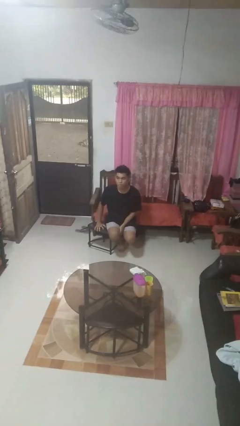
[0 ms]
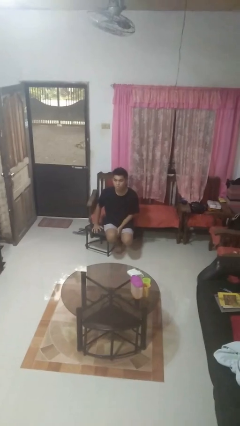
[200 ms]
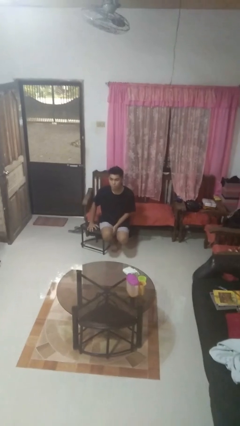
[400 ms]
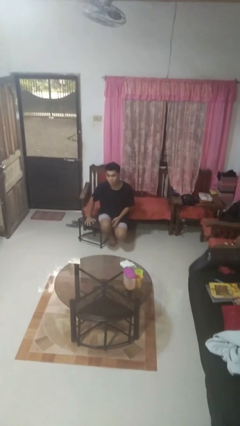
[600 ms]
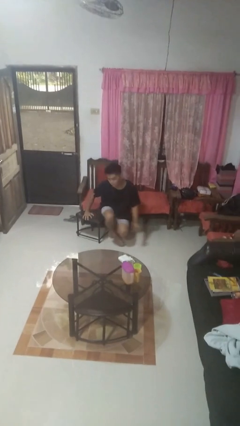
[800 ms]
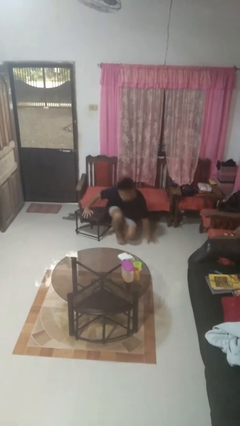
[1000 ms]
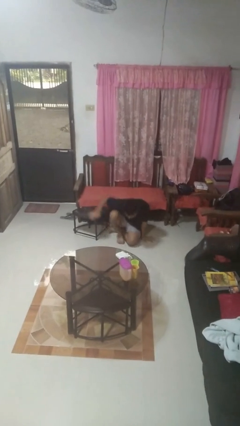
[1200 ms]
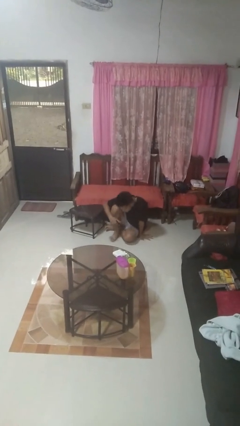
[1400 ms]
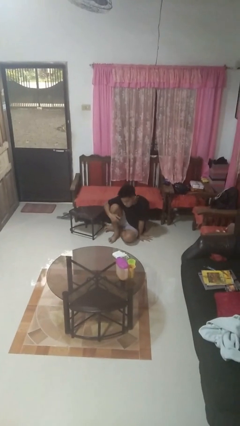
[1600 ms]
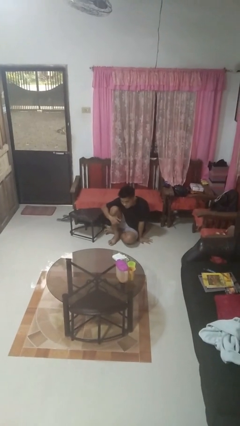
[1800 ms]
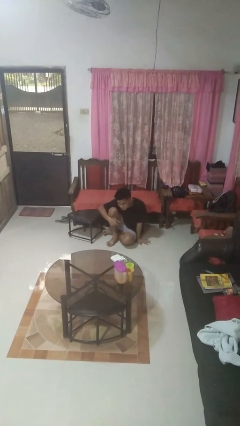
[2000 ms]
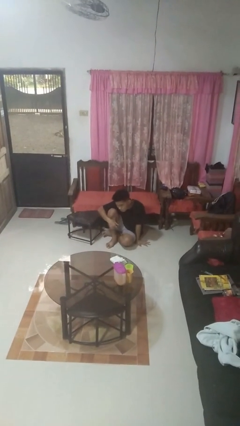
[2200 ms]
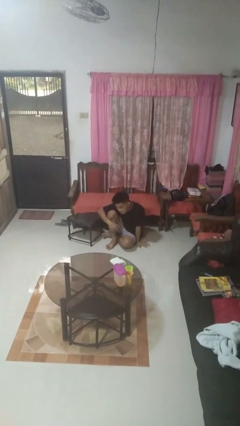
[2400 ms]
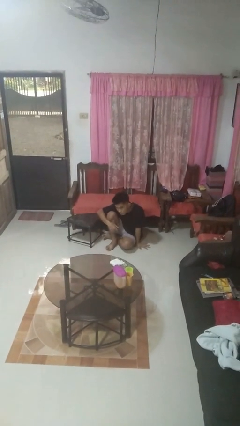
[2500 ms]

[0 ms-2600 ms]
person falls from chair

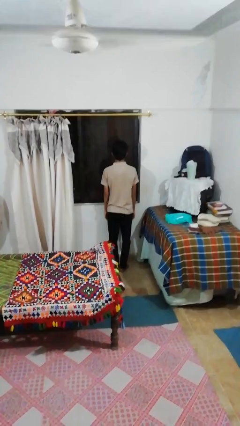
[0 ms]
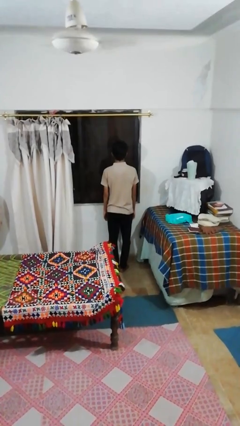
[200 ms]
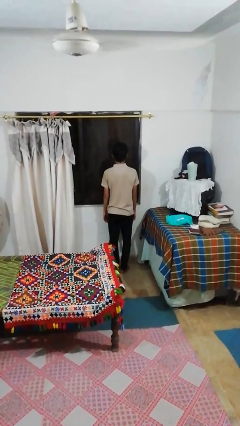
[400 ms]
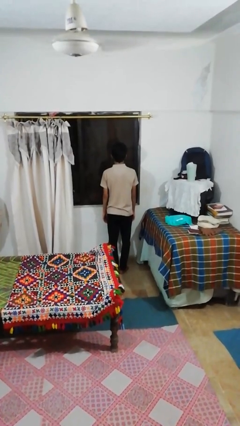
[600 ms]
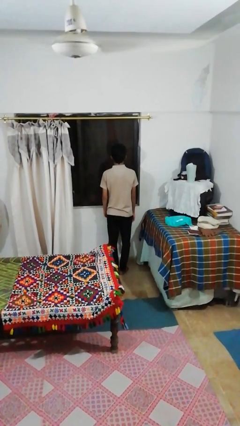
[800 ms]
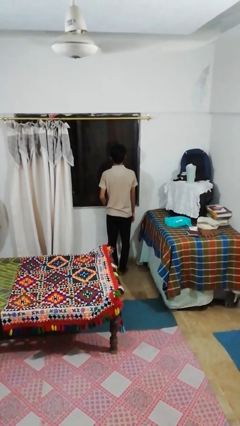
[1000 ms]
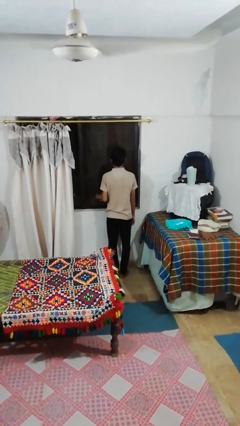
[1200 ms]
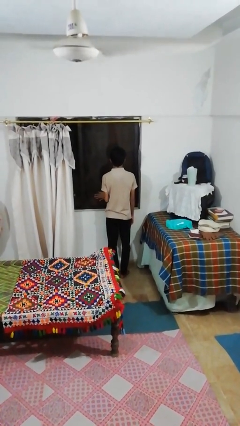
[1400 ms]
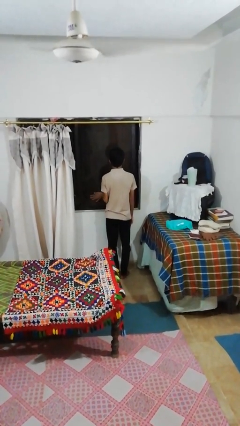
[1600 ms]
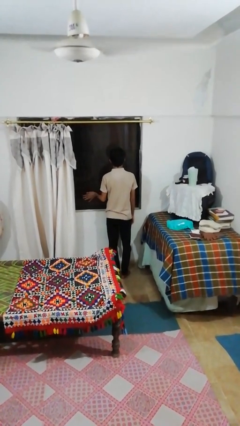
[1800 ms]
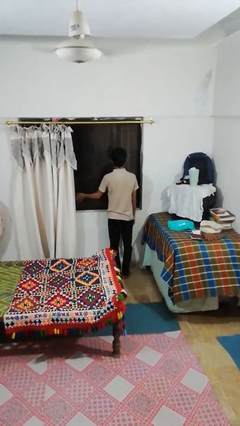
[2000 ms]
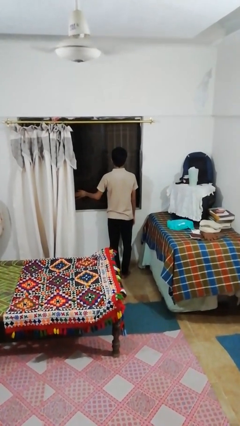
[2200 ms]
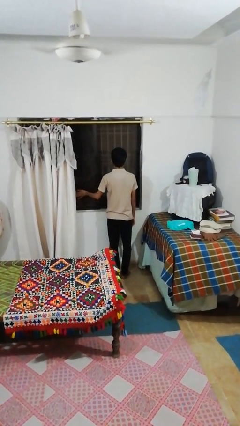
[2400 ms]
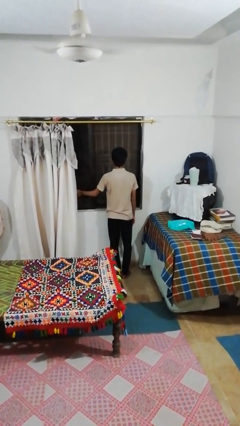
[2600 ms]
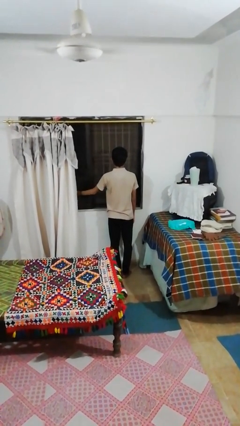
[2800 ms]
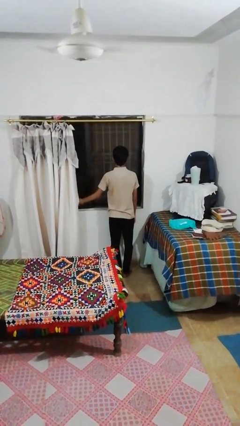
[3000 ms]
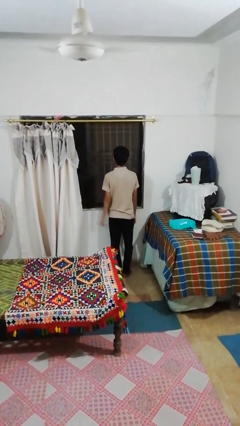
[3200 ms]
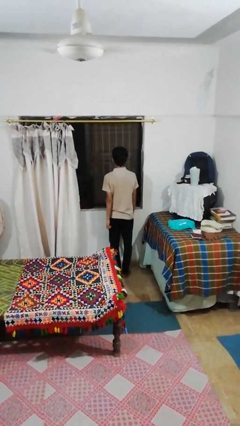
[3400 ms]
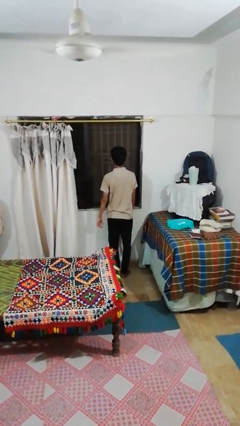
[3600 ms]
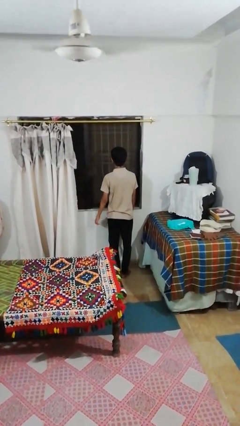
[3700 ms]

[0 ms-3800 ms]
person opens sliding door

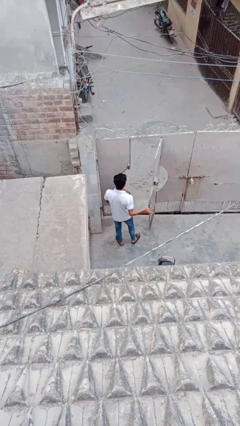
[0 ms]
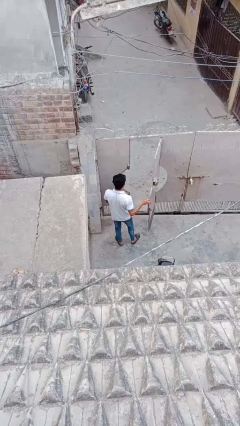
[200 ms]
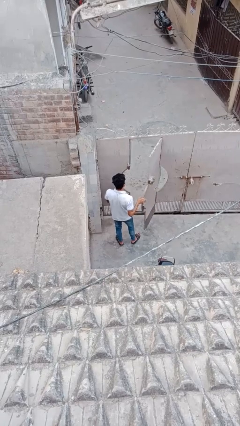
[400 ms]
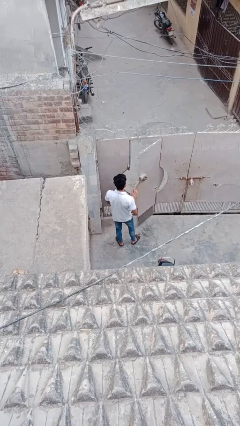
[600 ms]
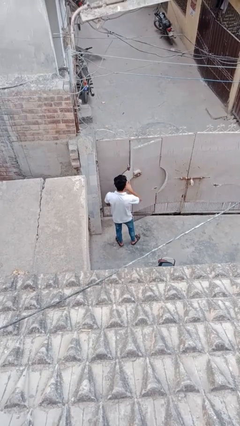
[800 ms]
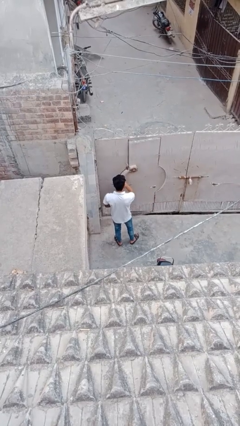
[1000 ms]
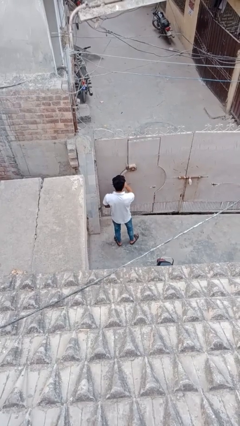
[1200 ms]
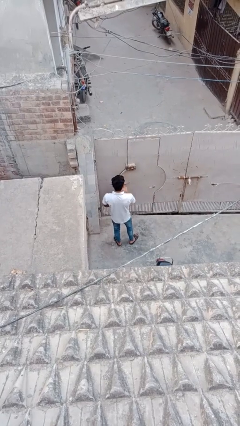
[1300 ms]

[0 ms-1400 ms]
person closes facility door

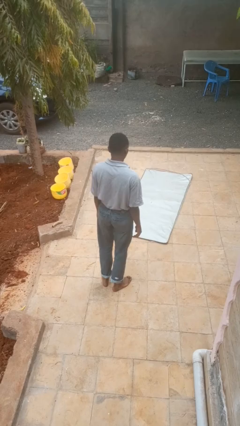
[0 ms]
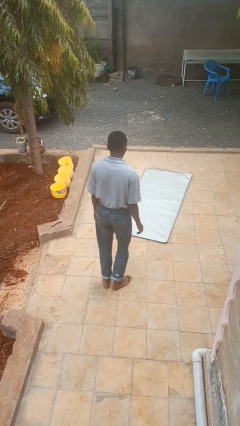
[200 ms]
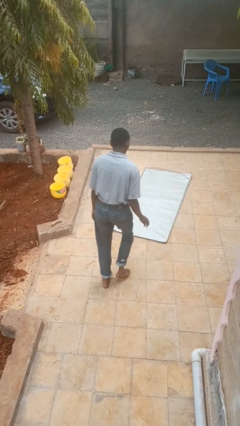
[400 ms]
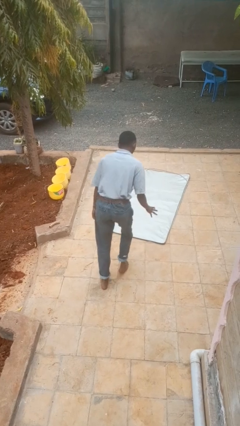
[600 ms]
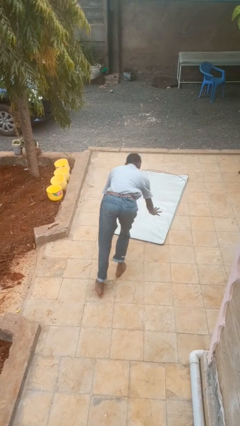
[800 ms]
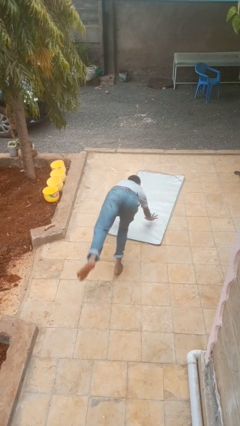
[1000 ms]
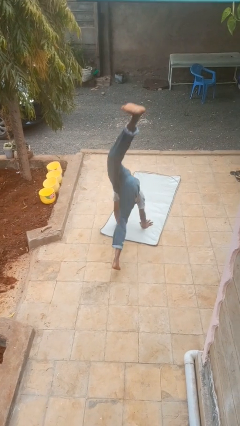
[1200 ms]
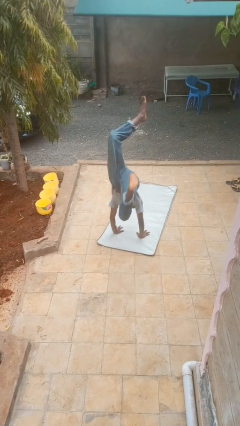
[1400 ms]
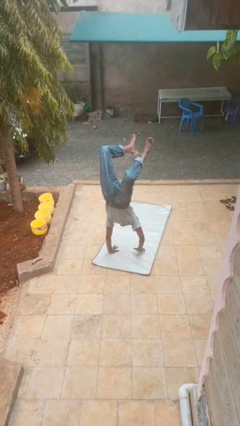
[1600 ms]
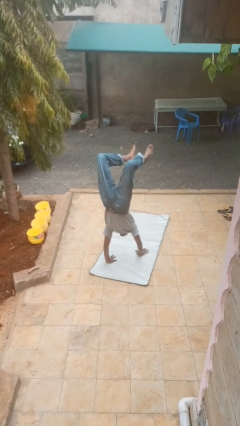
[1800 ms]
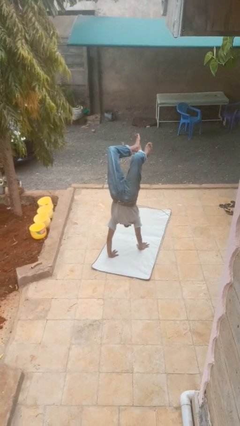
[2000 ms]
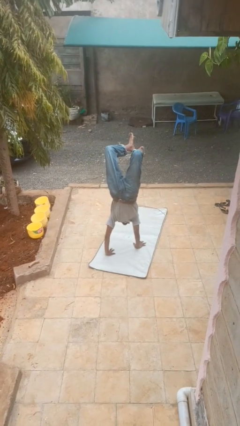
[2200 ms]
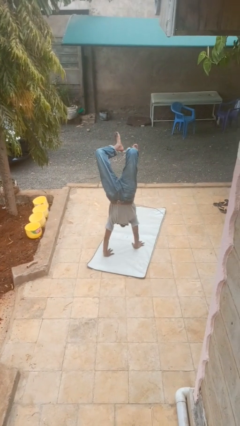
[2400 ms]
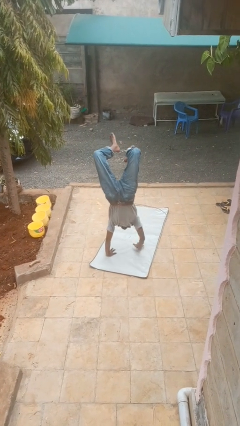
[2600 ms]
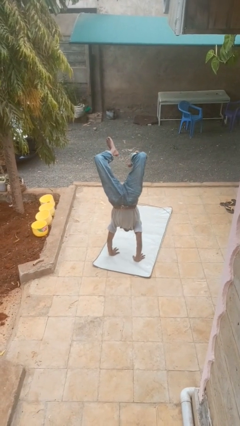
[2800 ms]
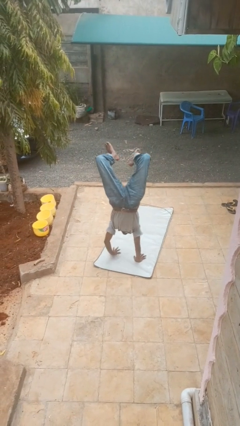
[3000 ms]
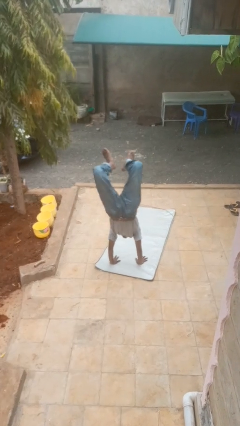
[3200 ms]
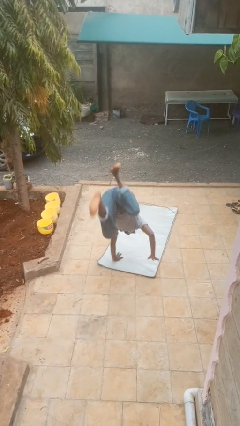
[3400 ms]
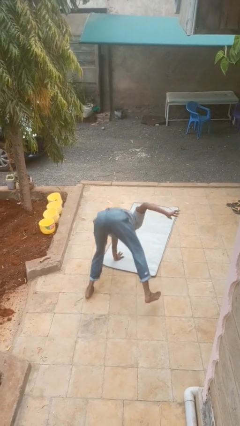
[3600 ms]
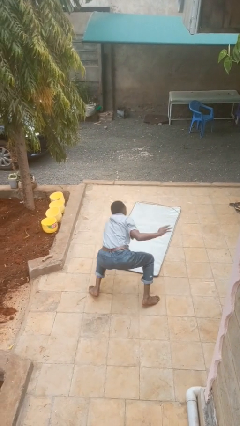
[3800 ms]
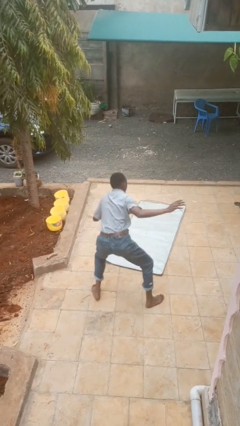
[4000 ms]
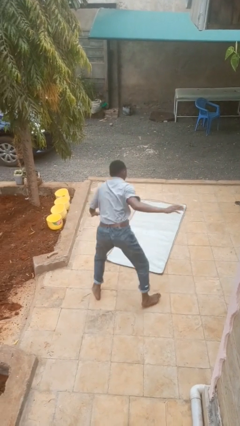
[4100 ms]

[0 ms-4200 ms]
person handstand

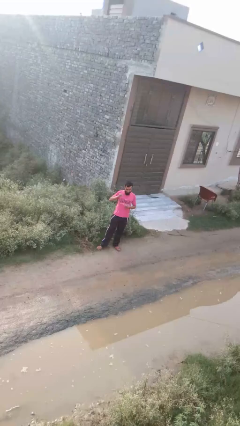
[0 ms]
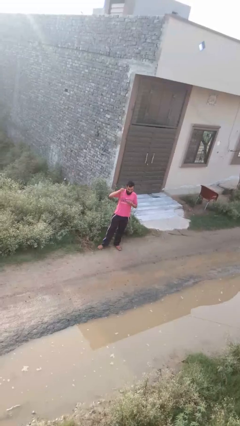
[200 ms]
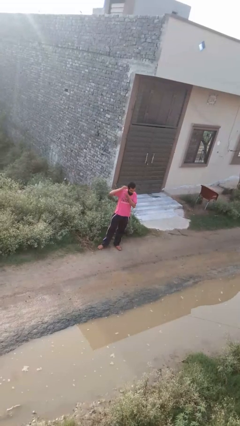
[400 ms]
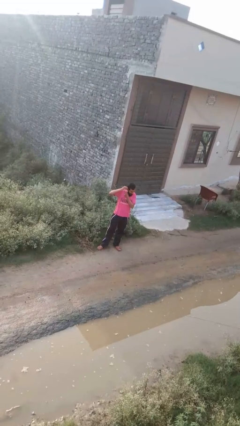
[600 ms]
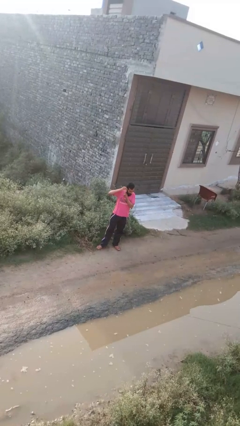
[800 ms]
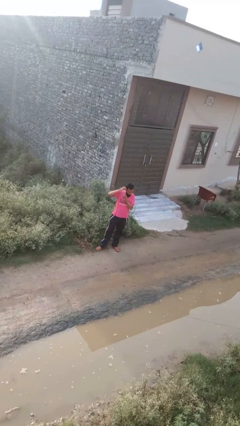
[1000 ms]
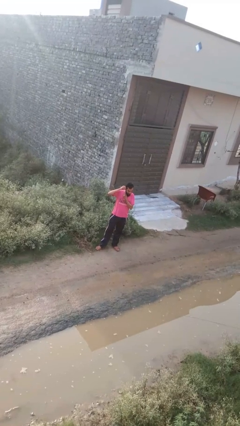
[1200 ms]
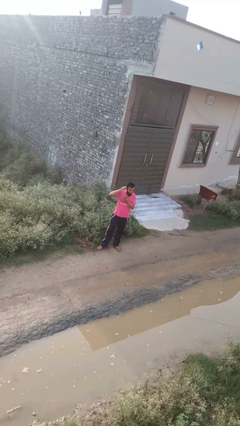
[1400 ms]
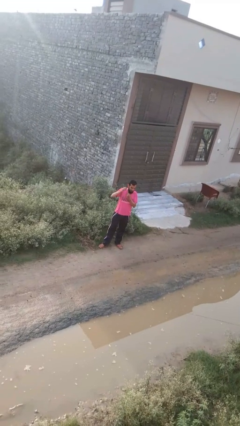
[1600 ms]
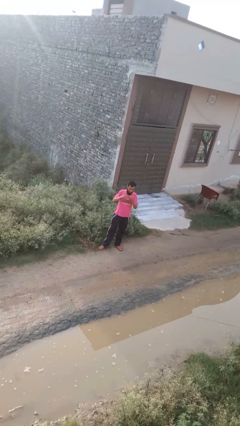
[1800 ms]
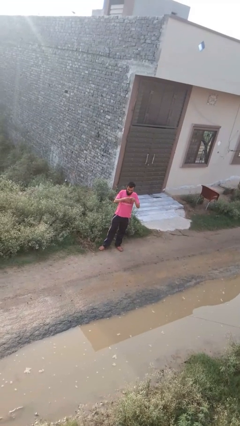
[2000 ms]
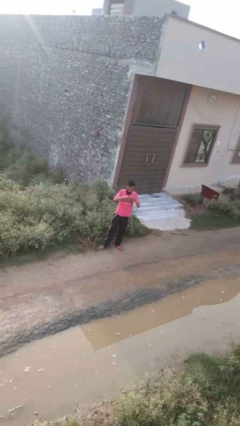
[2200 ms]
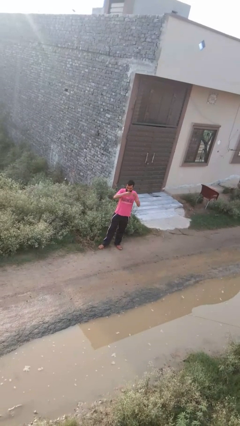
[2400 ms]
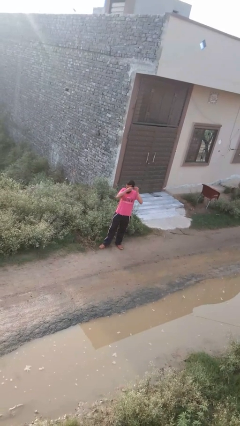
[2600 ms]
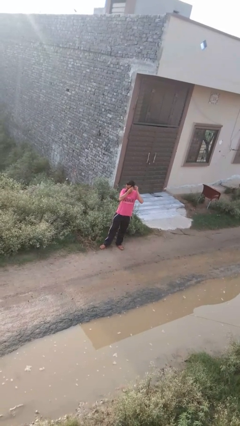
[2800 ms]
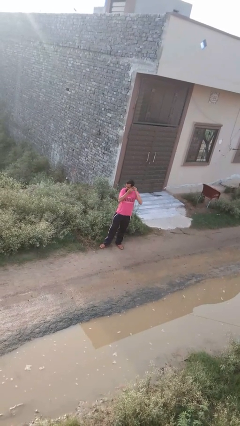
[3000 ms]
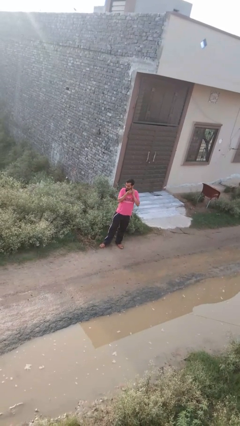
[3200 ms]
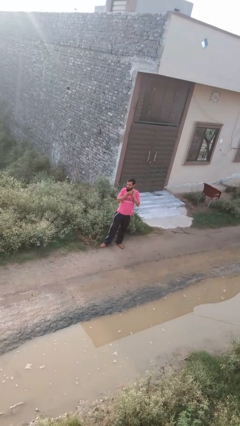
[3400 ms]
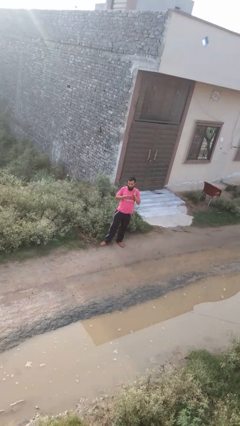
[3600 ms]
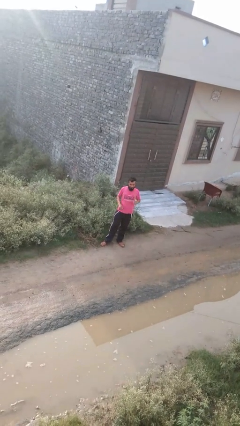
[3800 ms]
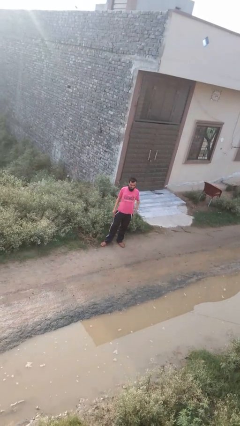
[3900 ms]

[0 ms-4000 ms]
person puts on earrings

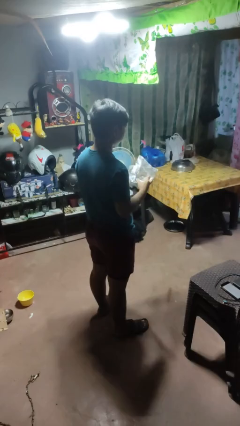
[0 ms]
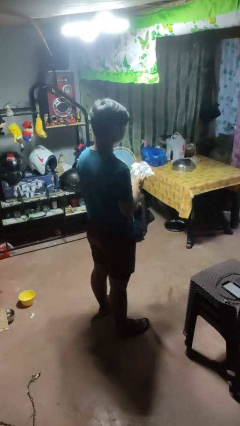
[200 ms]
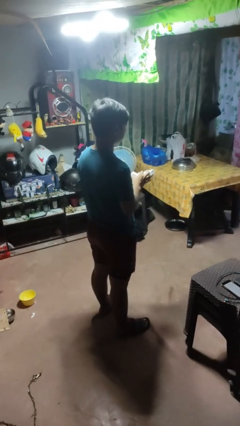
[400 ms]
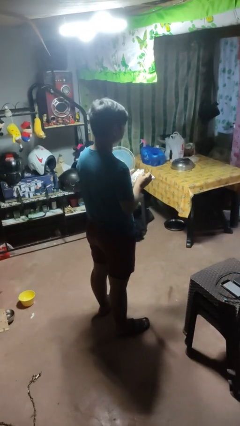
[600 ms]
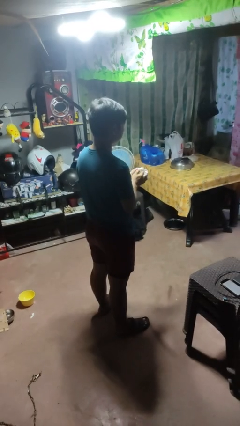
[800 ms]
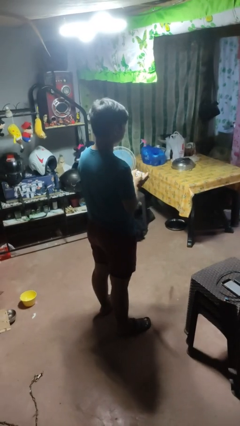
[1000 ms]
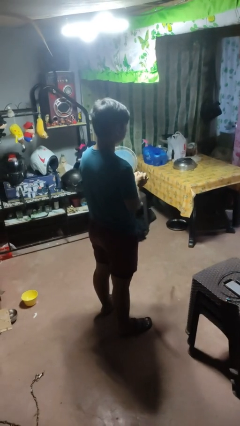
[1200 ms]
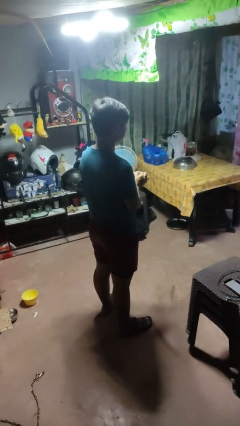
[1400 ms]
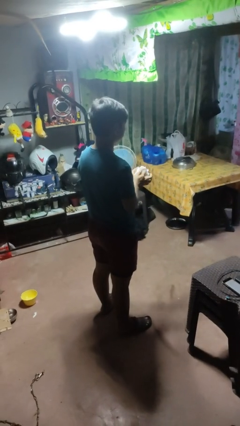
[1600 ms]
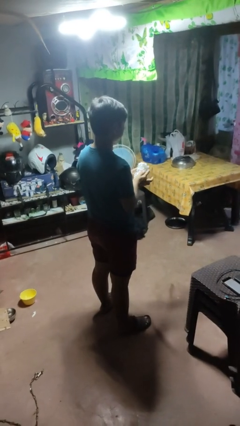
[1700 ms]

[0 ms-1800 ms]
person crumples paper
